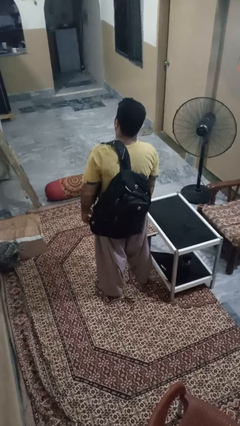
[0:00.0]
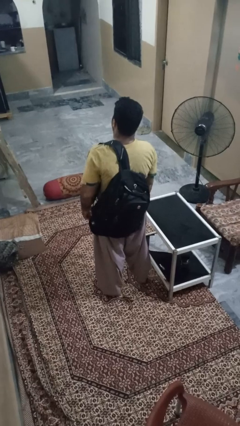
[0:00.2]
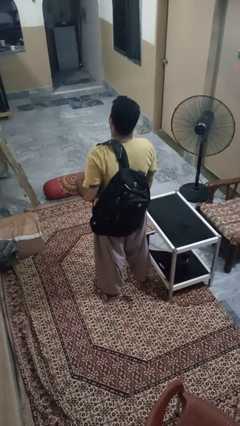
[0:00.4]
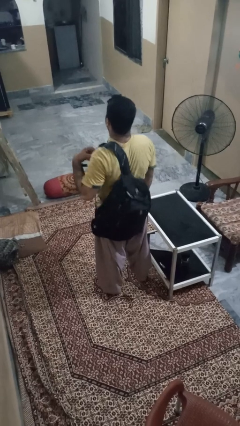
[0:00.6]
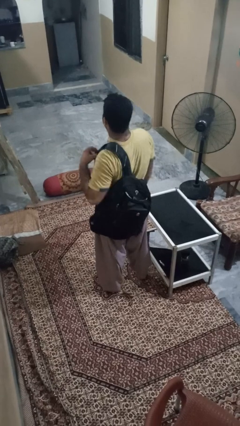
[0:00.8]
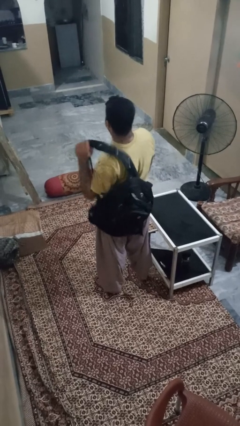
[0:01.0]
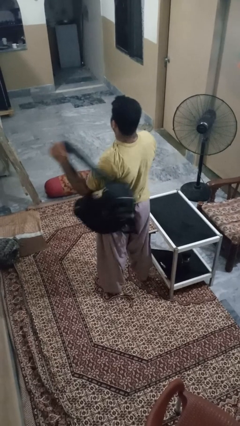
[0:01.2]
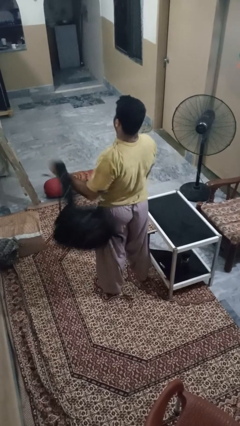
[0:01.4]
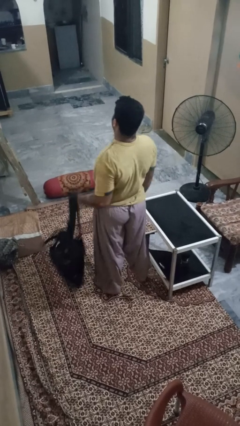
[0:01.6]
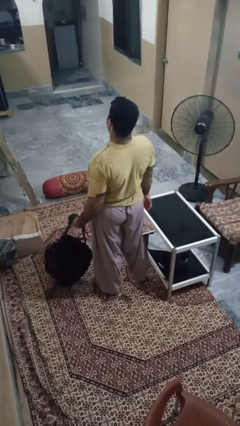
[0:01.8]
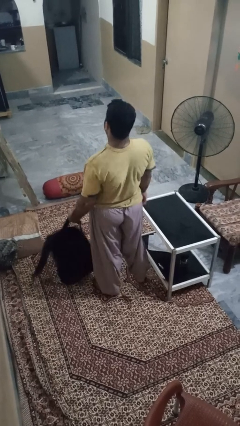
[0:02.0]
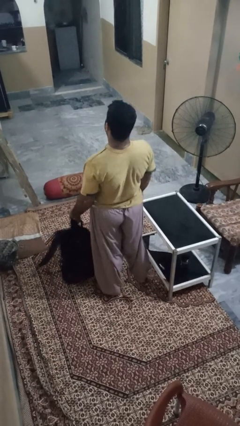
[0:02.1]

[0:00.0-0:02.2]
person takes off backpack

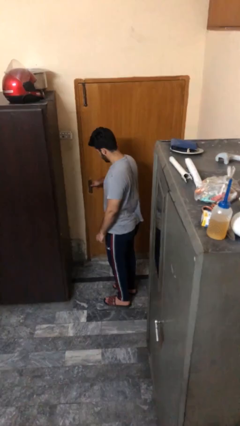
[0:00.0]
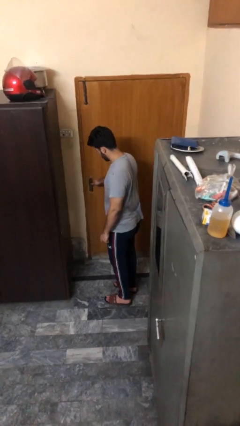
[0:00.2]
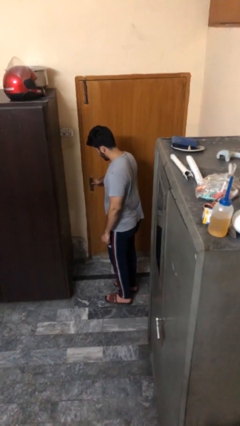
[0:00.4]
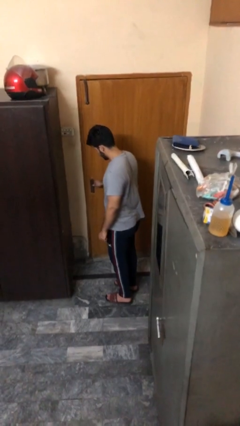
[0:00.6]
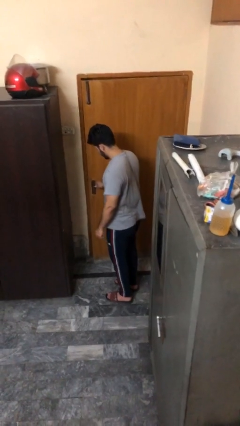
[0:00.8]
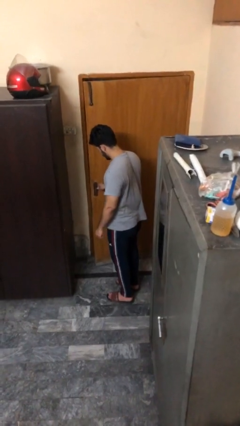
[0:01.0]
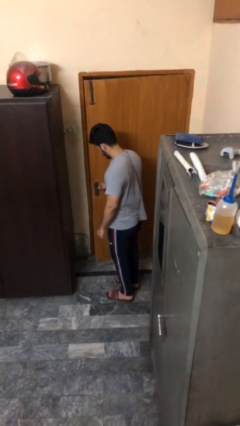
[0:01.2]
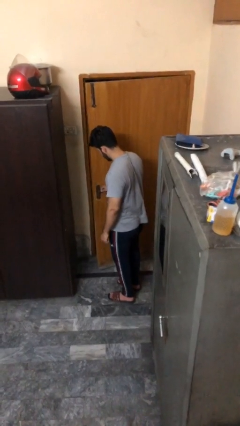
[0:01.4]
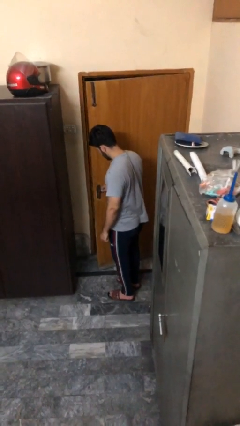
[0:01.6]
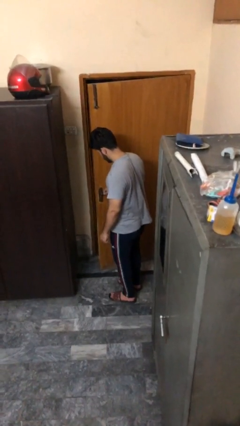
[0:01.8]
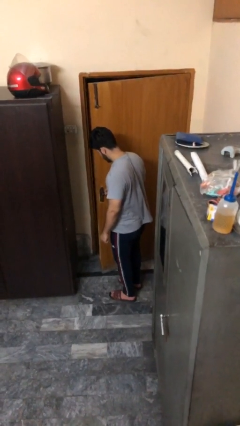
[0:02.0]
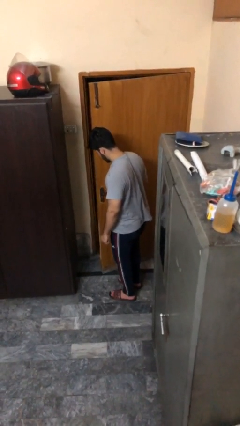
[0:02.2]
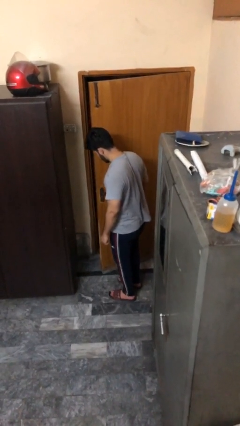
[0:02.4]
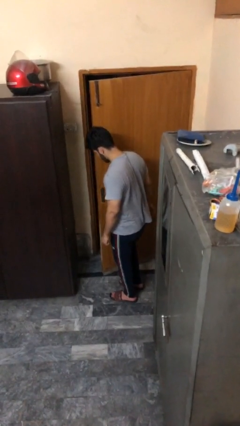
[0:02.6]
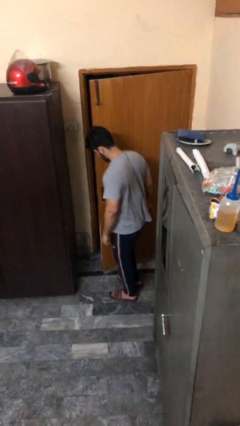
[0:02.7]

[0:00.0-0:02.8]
person opens facility door

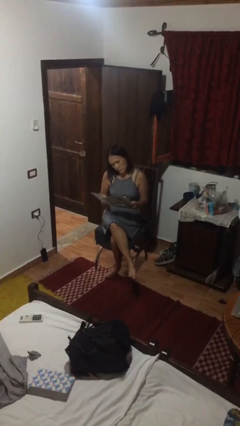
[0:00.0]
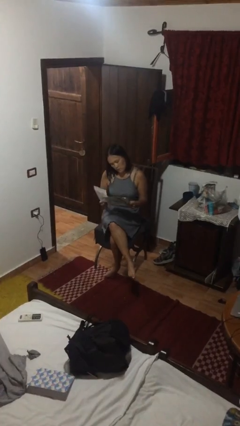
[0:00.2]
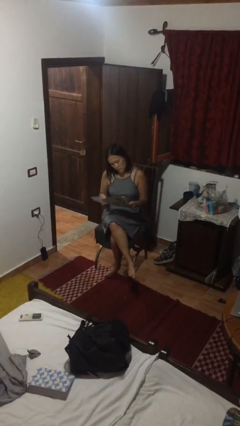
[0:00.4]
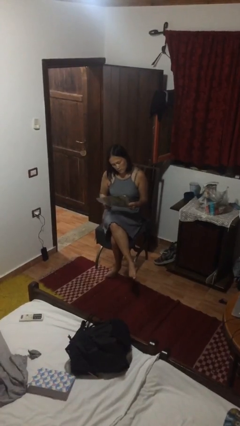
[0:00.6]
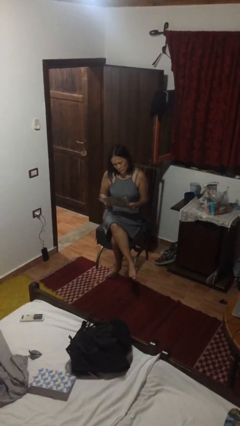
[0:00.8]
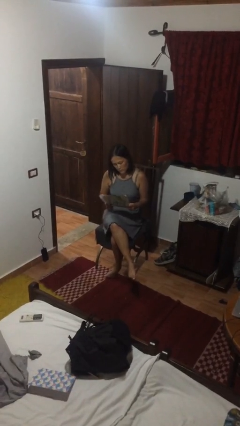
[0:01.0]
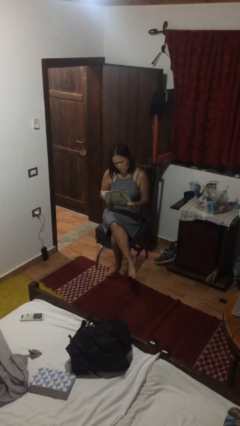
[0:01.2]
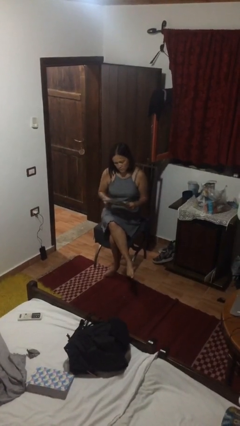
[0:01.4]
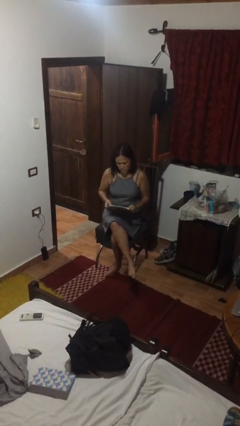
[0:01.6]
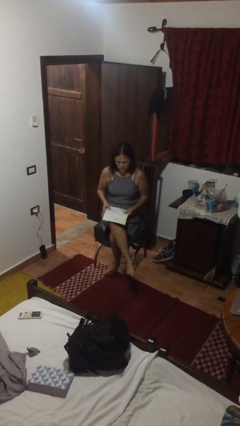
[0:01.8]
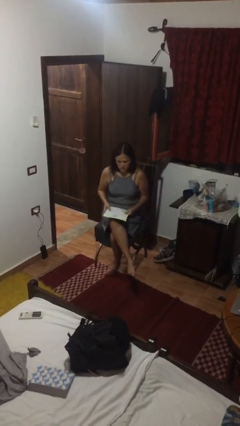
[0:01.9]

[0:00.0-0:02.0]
person reads newspaper

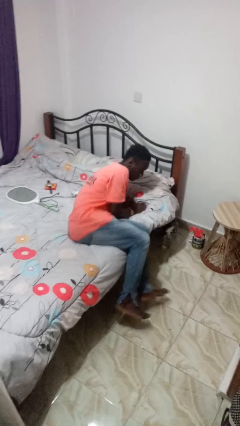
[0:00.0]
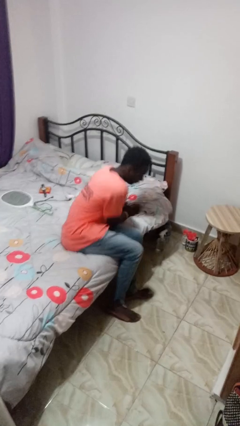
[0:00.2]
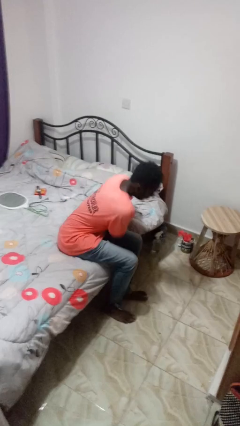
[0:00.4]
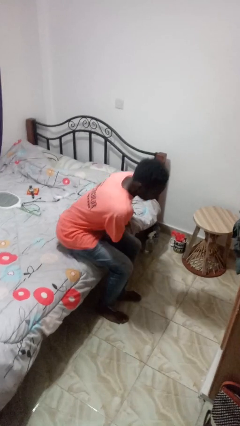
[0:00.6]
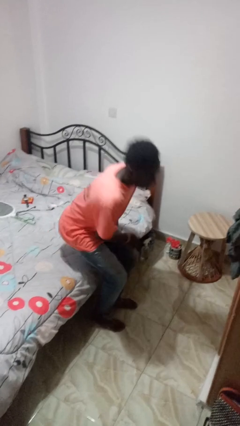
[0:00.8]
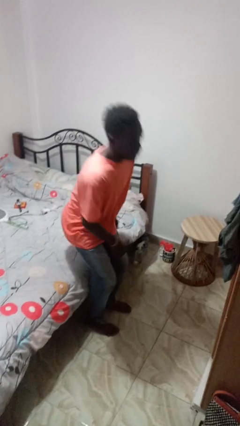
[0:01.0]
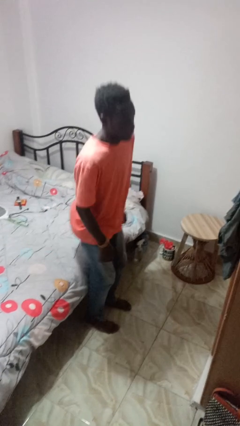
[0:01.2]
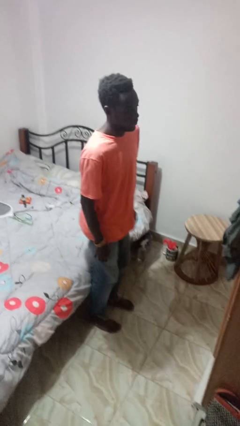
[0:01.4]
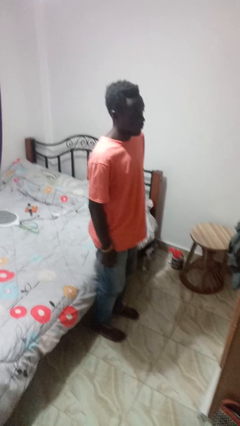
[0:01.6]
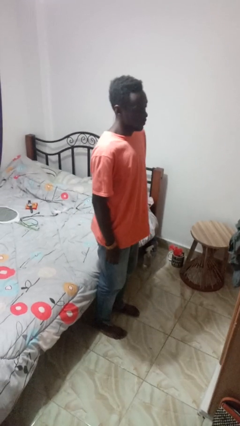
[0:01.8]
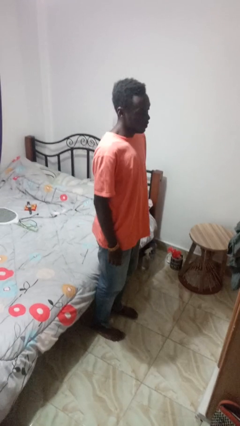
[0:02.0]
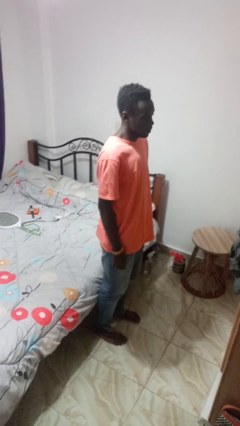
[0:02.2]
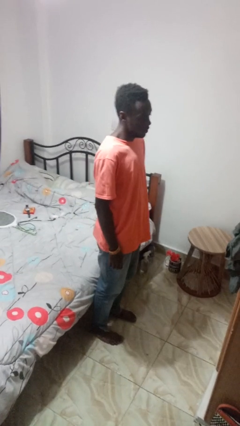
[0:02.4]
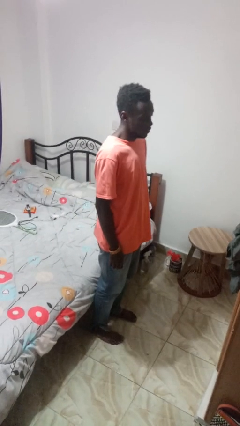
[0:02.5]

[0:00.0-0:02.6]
person stands up

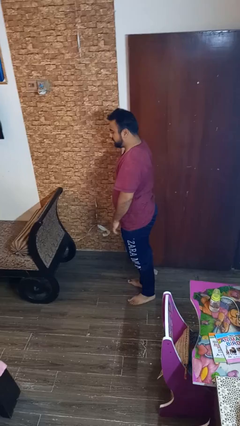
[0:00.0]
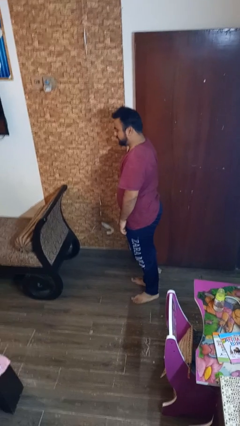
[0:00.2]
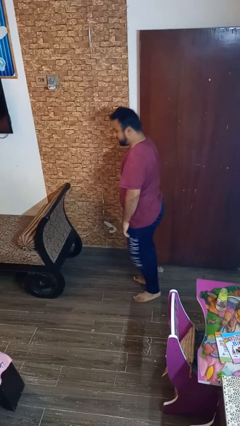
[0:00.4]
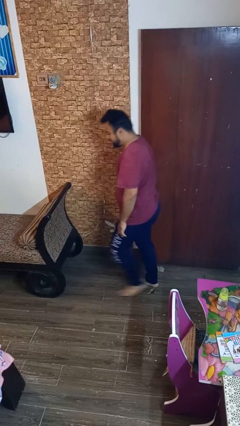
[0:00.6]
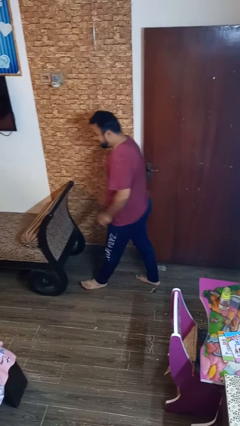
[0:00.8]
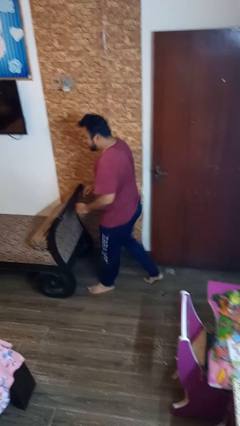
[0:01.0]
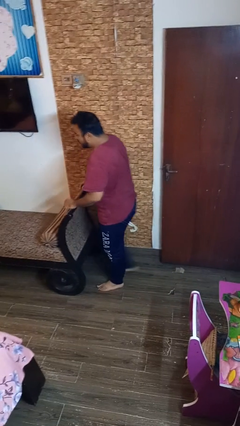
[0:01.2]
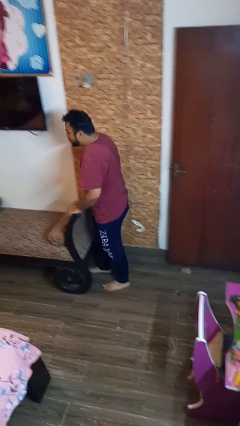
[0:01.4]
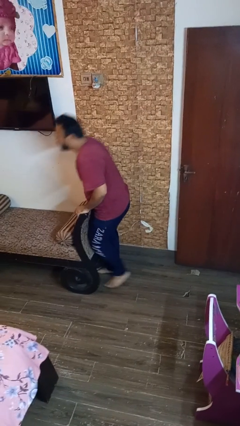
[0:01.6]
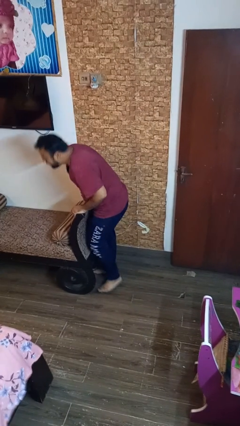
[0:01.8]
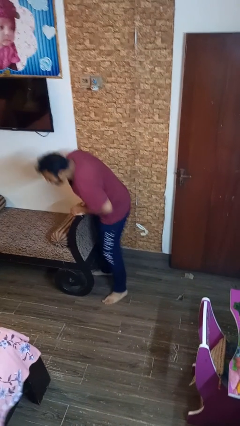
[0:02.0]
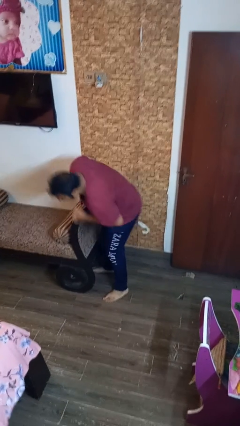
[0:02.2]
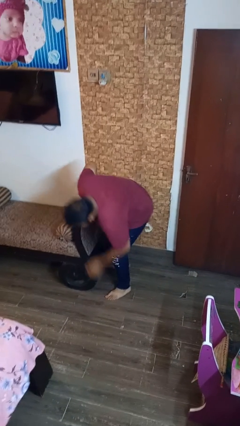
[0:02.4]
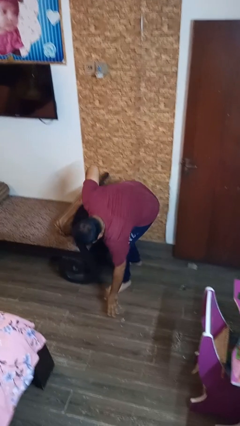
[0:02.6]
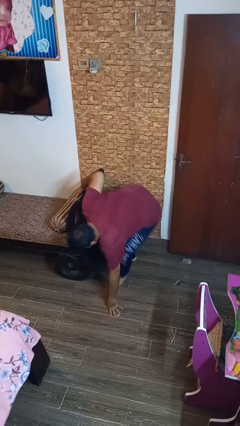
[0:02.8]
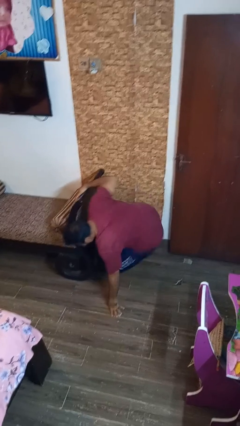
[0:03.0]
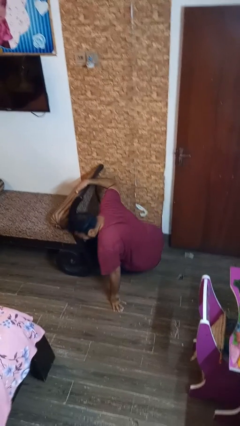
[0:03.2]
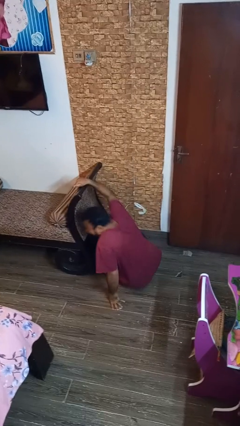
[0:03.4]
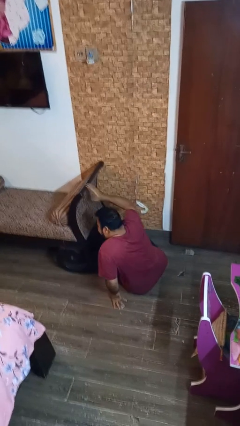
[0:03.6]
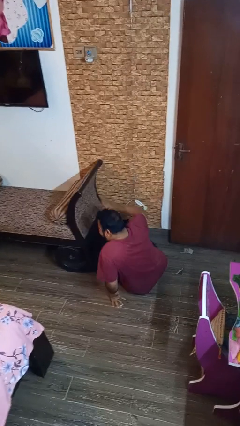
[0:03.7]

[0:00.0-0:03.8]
person trips on object on floor

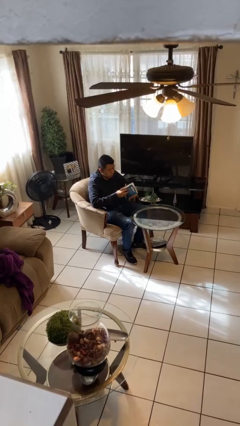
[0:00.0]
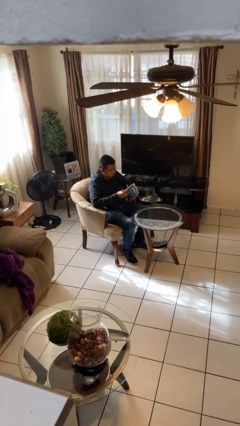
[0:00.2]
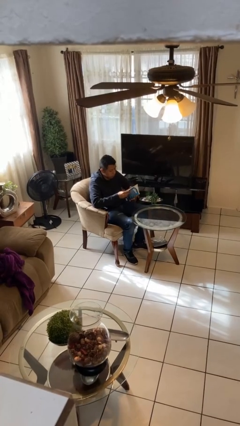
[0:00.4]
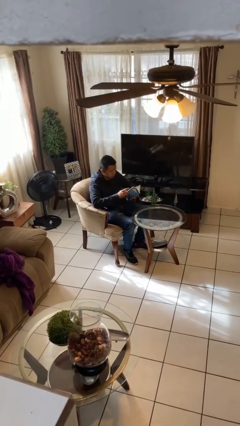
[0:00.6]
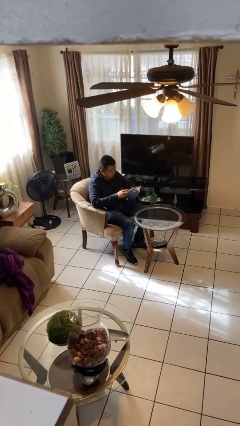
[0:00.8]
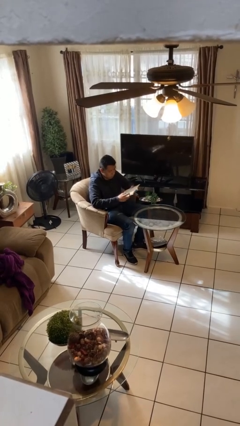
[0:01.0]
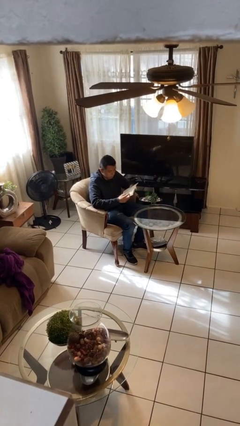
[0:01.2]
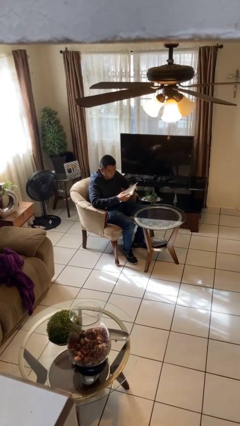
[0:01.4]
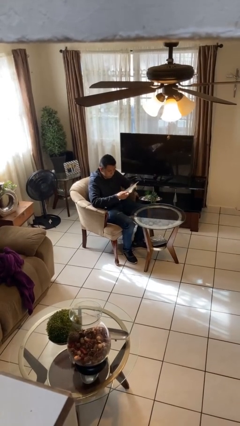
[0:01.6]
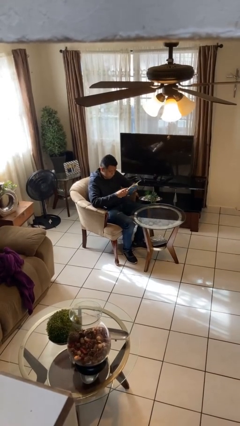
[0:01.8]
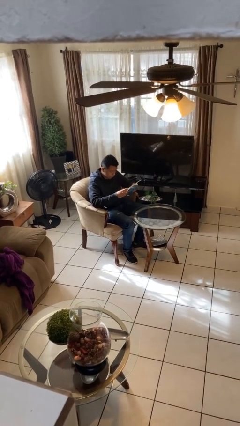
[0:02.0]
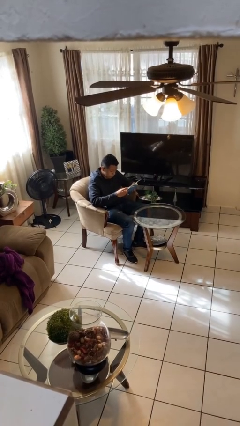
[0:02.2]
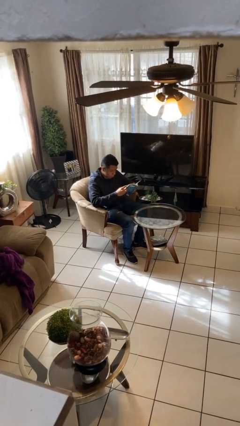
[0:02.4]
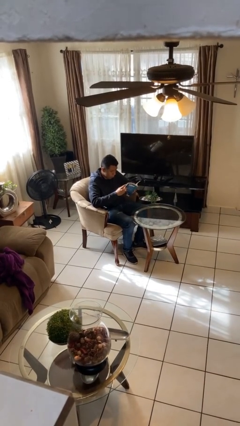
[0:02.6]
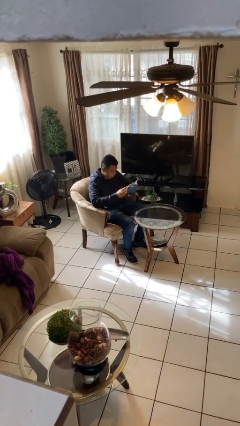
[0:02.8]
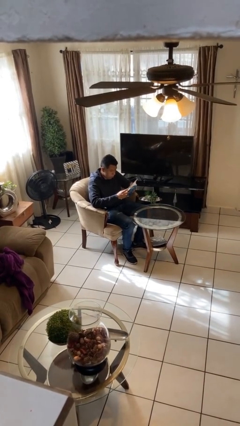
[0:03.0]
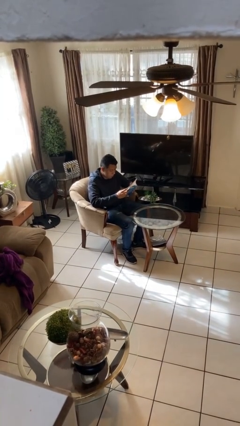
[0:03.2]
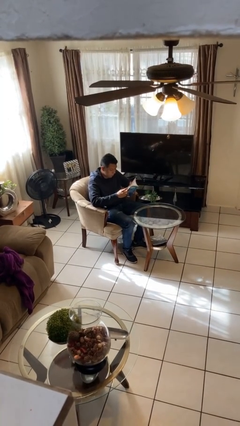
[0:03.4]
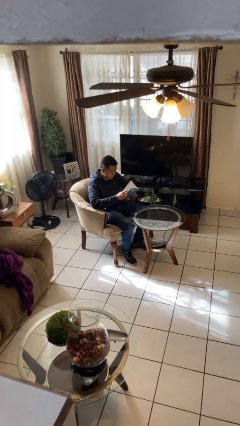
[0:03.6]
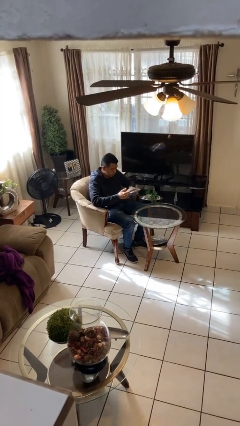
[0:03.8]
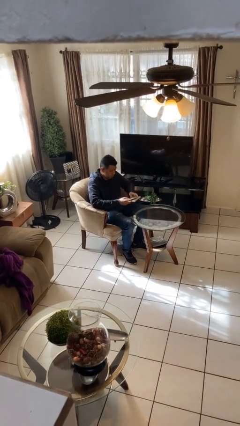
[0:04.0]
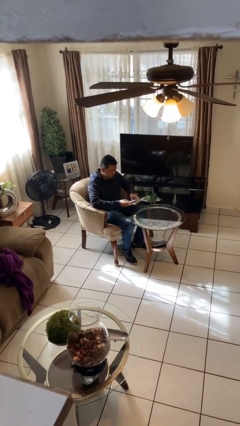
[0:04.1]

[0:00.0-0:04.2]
person reads document
